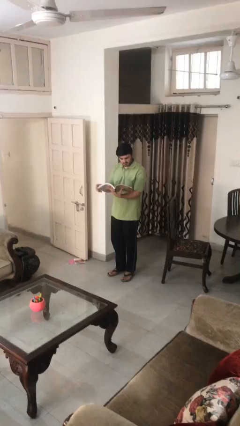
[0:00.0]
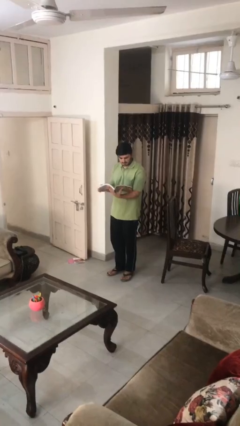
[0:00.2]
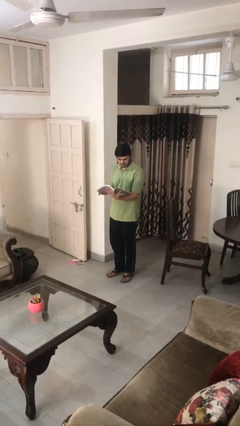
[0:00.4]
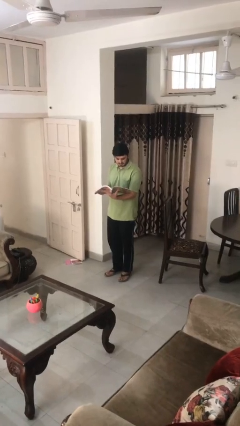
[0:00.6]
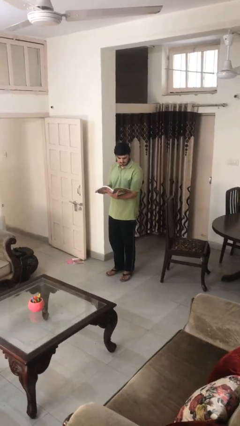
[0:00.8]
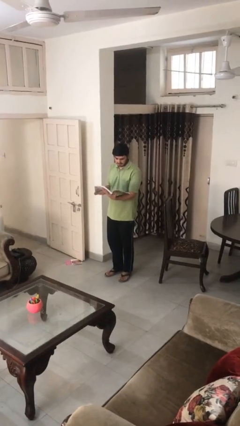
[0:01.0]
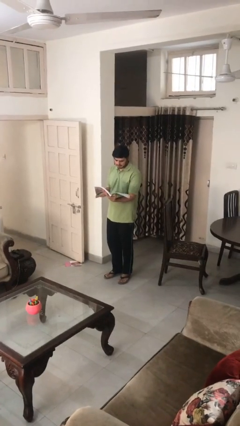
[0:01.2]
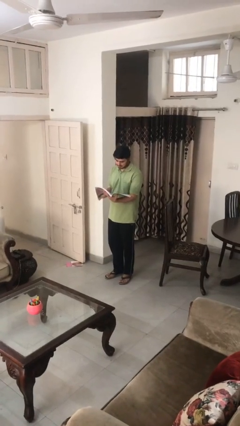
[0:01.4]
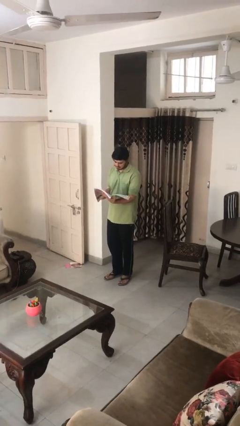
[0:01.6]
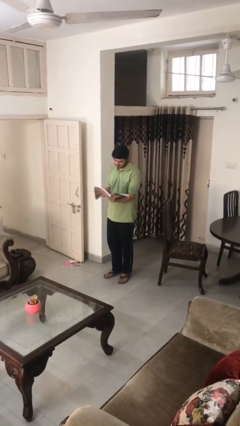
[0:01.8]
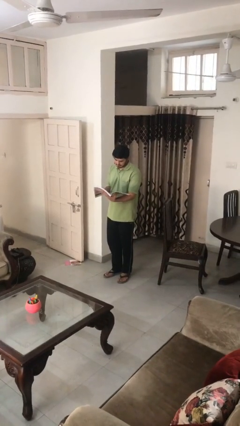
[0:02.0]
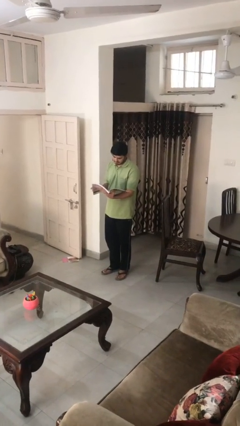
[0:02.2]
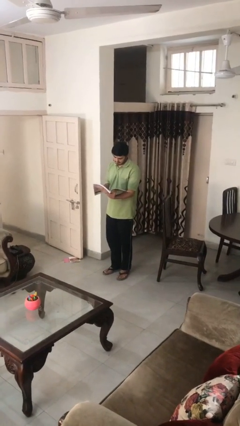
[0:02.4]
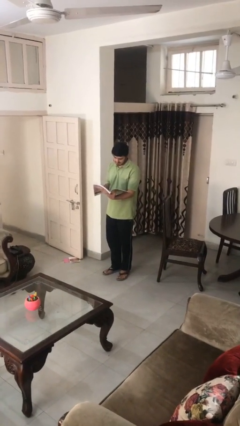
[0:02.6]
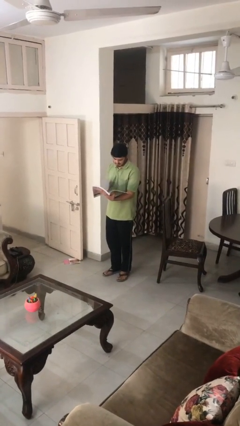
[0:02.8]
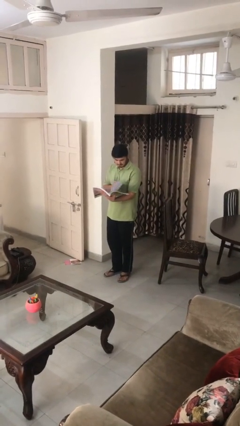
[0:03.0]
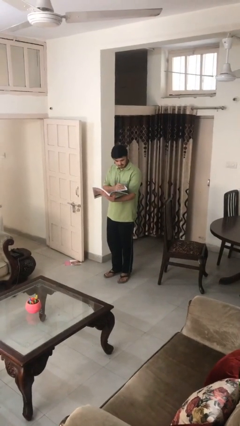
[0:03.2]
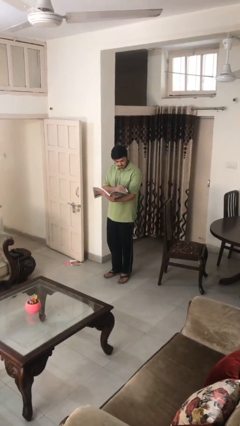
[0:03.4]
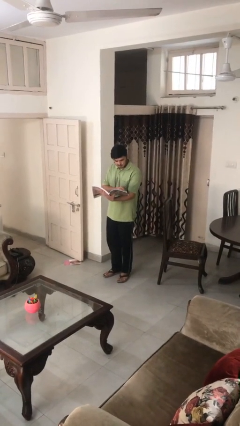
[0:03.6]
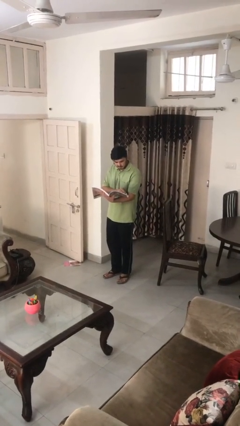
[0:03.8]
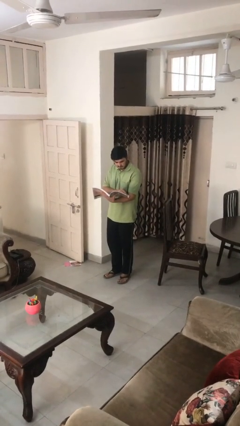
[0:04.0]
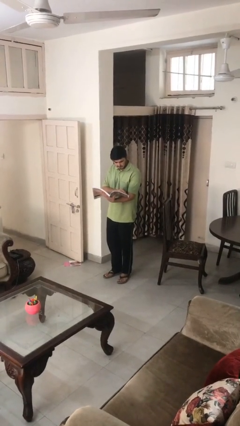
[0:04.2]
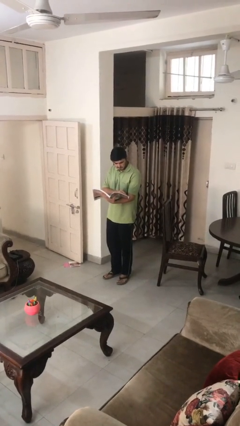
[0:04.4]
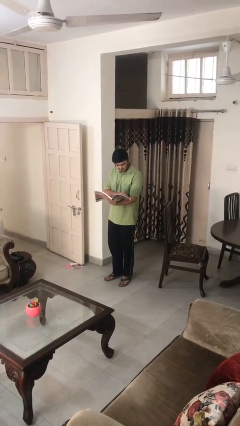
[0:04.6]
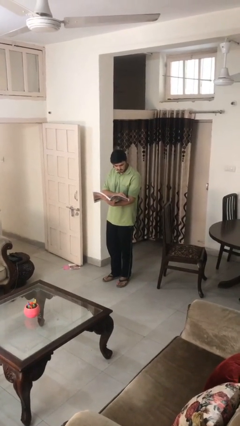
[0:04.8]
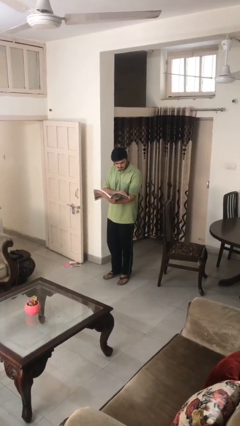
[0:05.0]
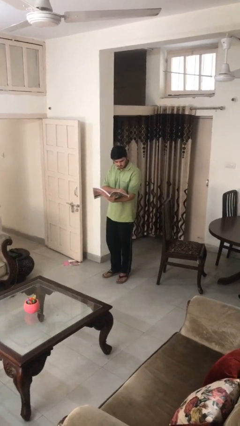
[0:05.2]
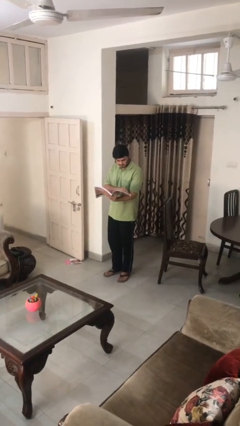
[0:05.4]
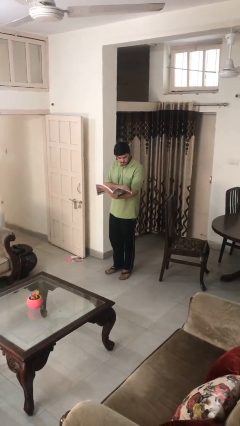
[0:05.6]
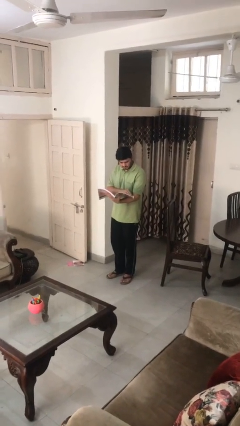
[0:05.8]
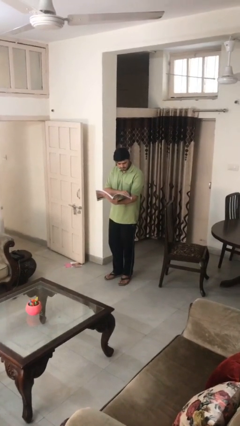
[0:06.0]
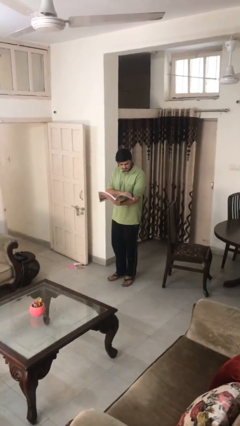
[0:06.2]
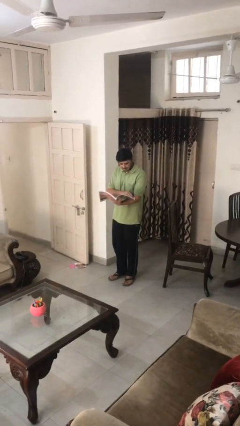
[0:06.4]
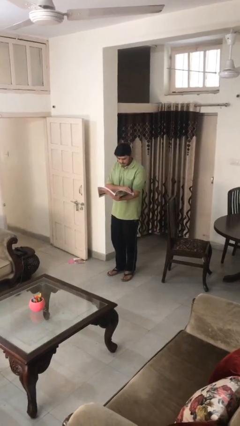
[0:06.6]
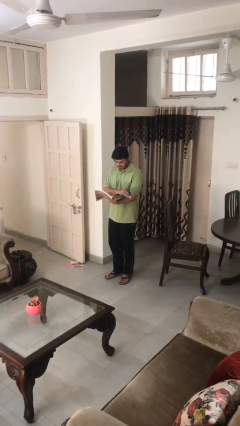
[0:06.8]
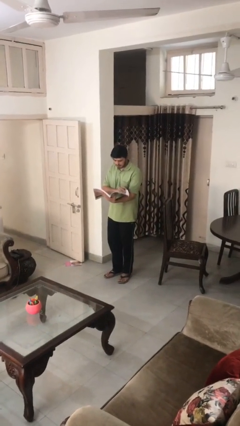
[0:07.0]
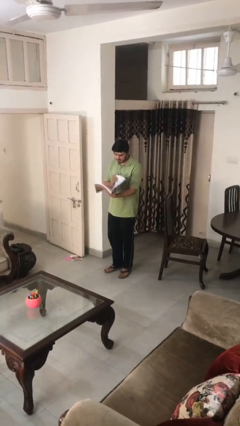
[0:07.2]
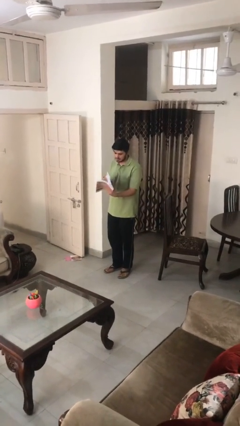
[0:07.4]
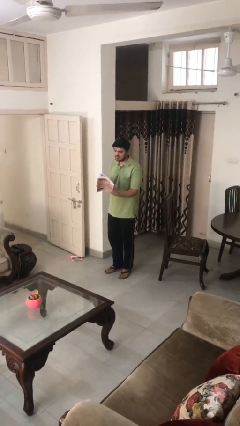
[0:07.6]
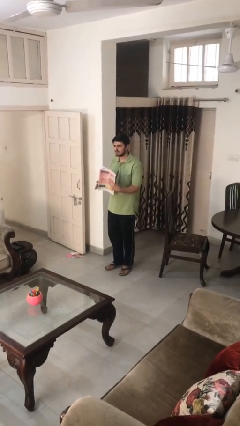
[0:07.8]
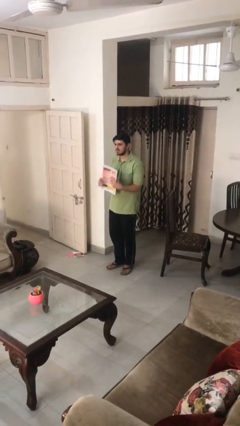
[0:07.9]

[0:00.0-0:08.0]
person reads document

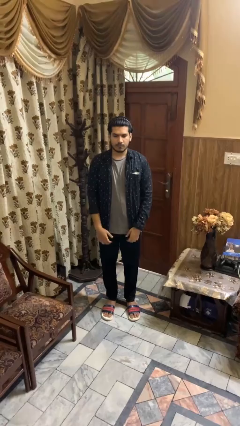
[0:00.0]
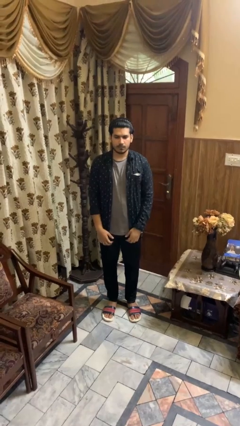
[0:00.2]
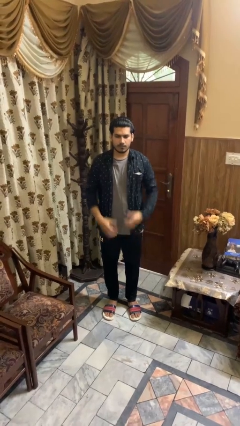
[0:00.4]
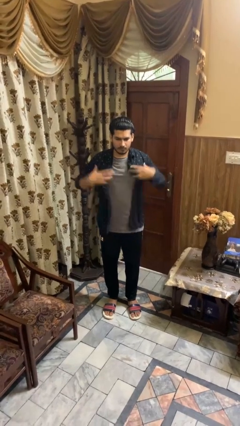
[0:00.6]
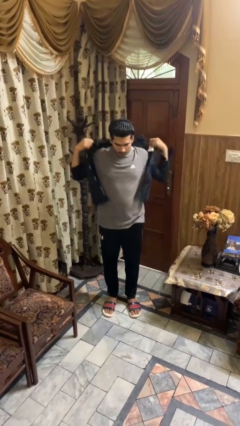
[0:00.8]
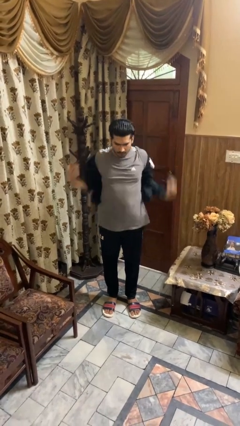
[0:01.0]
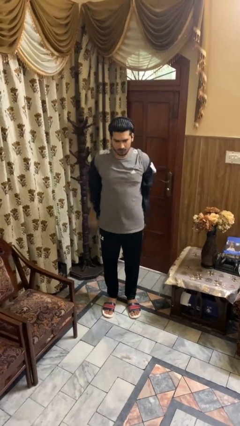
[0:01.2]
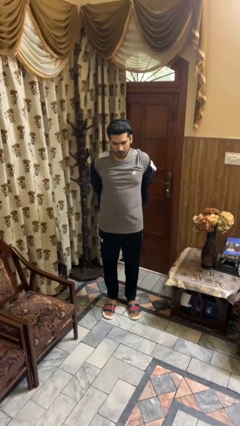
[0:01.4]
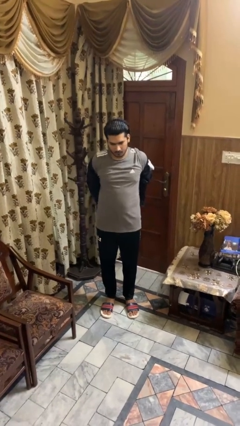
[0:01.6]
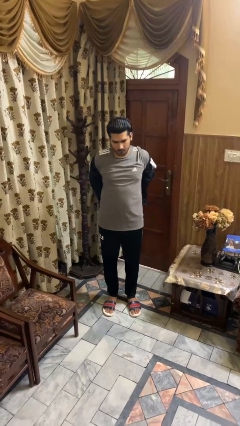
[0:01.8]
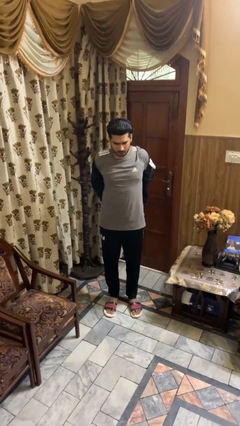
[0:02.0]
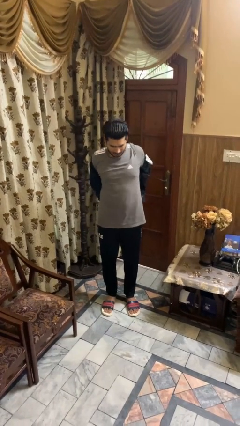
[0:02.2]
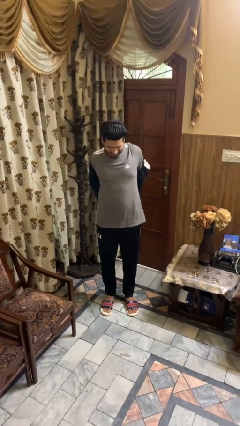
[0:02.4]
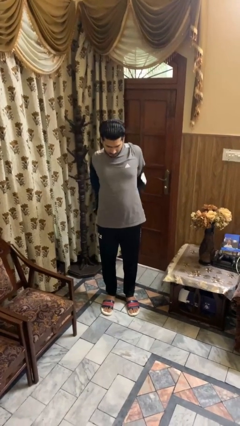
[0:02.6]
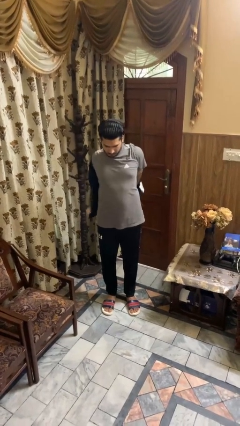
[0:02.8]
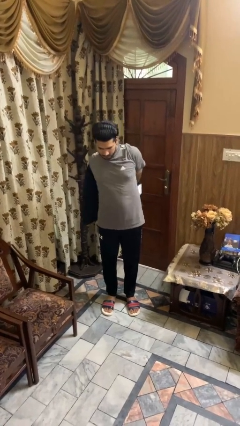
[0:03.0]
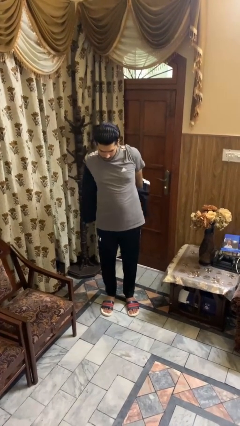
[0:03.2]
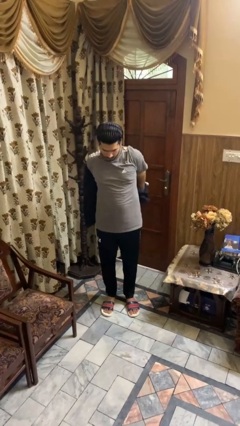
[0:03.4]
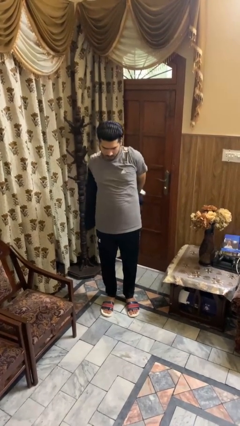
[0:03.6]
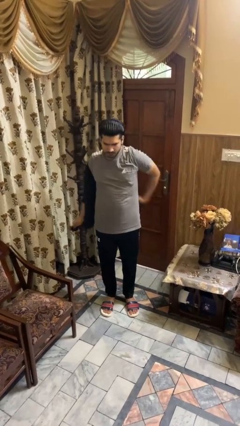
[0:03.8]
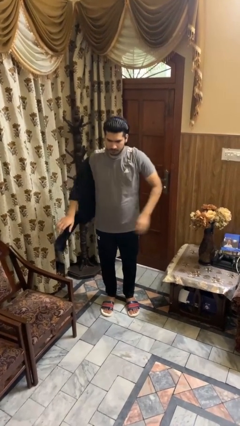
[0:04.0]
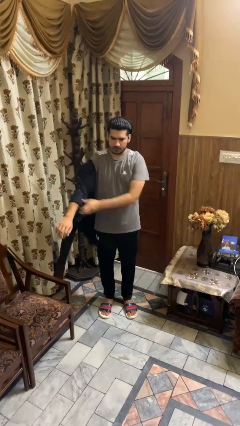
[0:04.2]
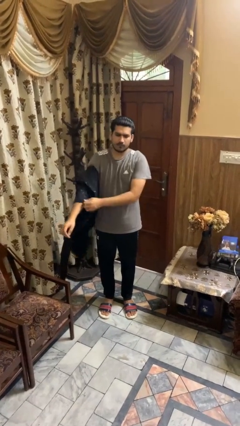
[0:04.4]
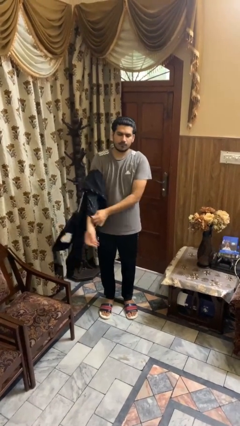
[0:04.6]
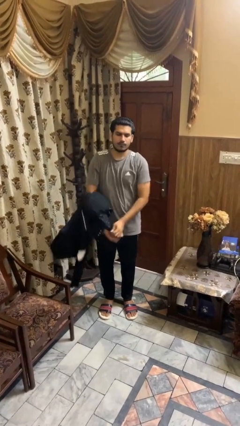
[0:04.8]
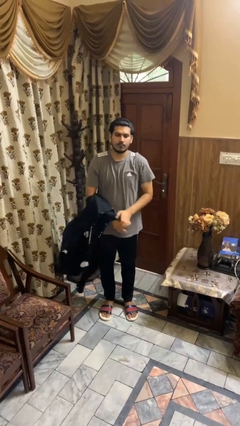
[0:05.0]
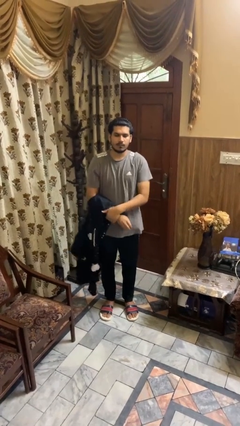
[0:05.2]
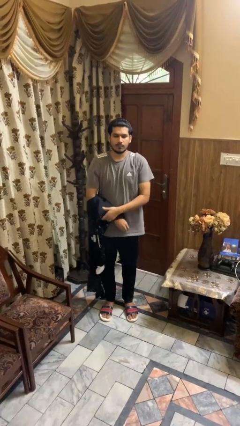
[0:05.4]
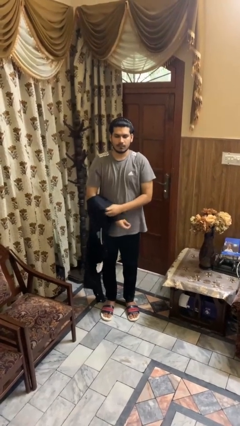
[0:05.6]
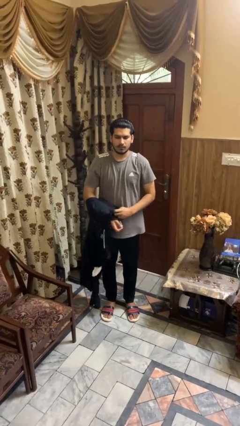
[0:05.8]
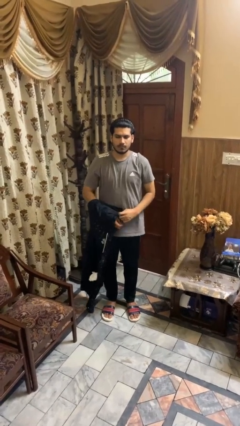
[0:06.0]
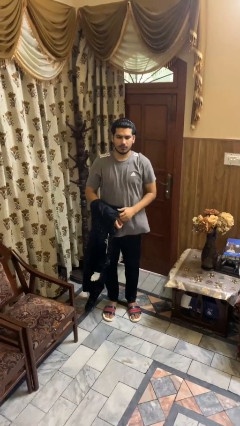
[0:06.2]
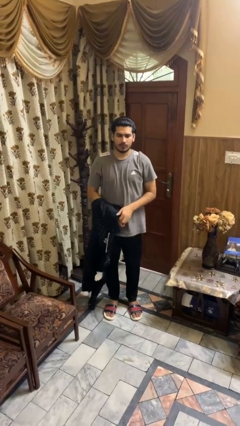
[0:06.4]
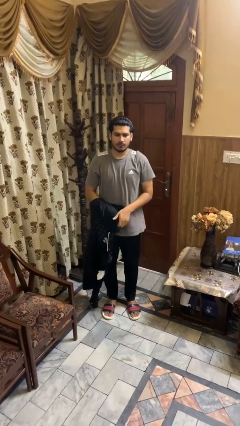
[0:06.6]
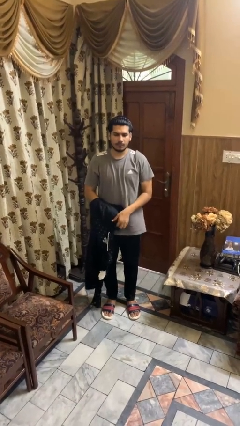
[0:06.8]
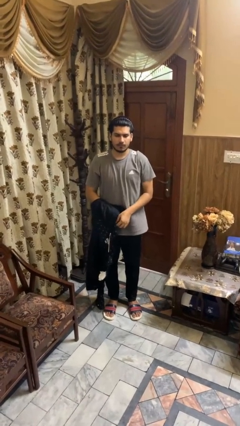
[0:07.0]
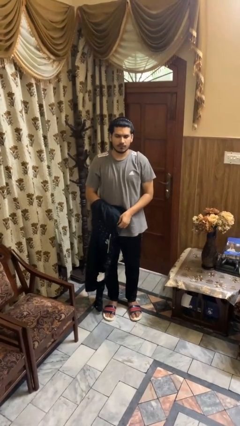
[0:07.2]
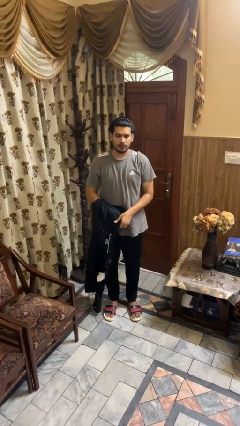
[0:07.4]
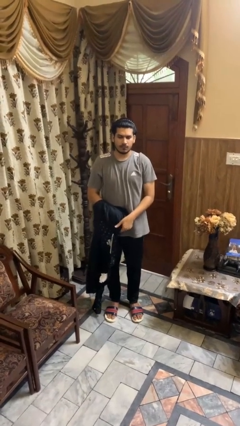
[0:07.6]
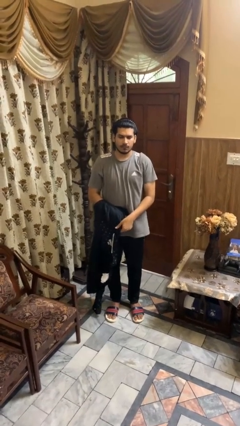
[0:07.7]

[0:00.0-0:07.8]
person takes off shirt

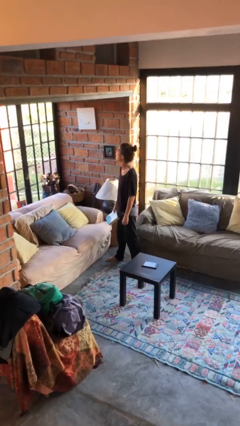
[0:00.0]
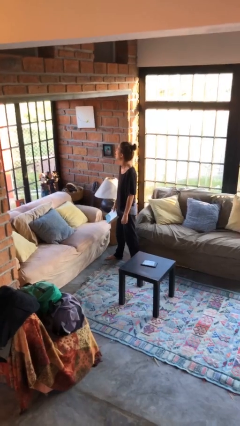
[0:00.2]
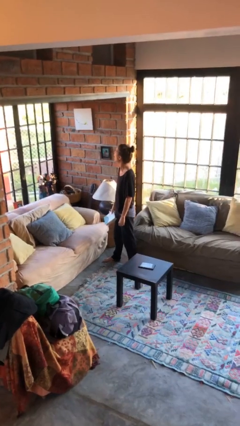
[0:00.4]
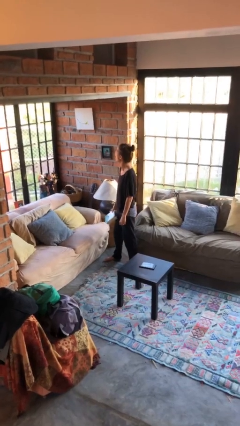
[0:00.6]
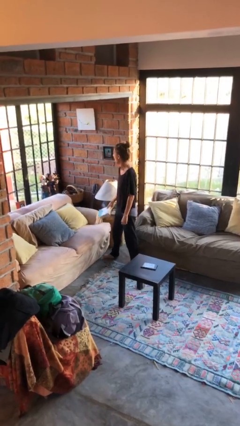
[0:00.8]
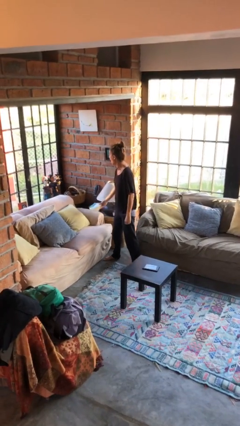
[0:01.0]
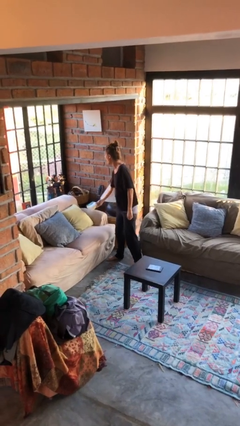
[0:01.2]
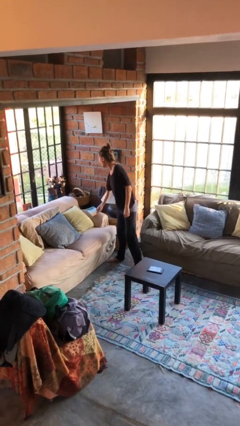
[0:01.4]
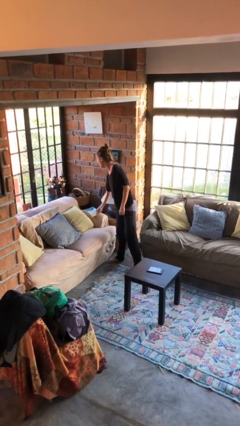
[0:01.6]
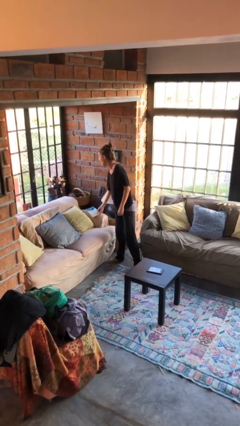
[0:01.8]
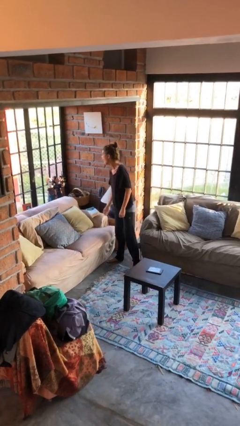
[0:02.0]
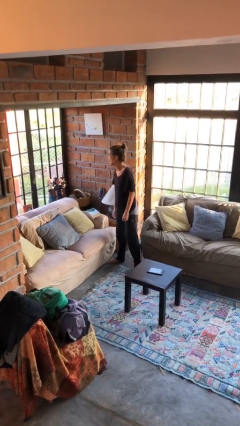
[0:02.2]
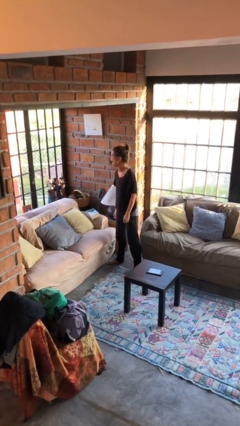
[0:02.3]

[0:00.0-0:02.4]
person puts down object on couch
